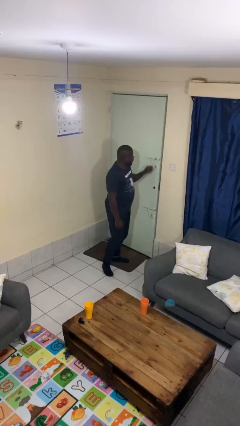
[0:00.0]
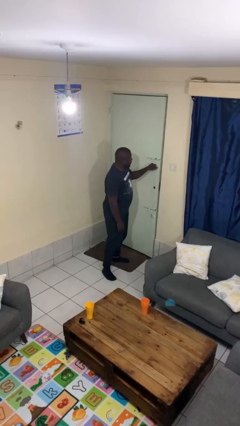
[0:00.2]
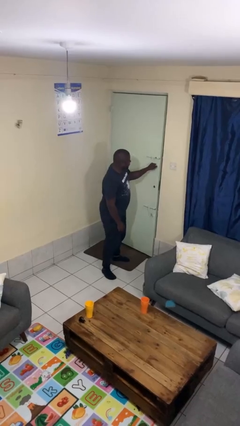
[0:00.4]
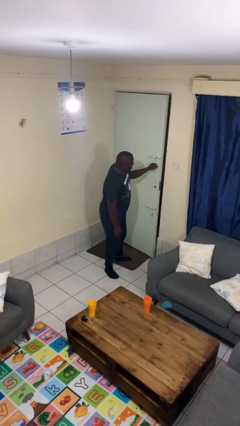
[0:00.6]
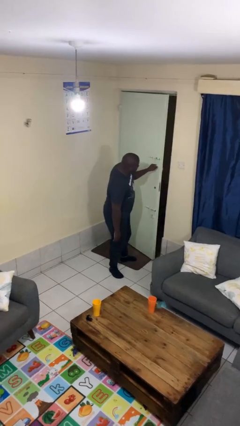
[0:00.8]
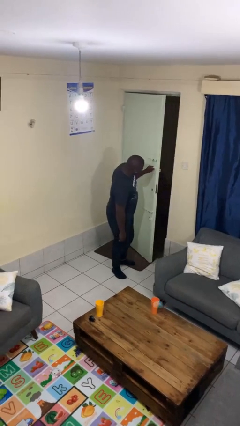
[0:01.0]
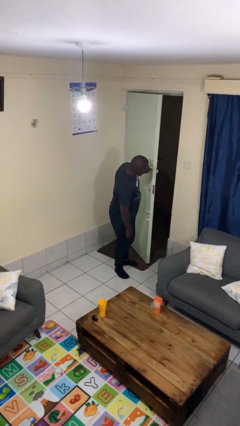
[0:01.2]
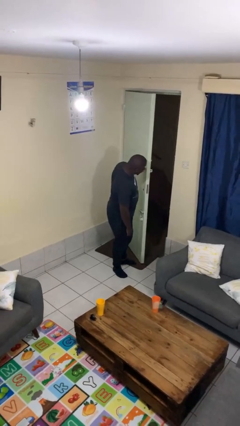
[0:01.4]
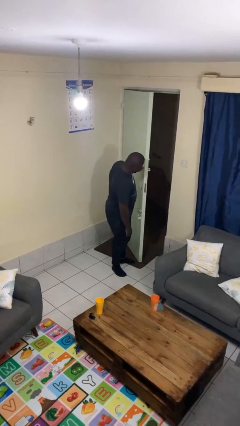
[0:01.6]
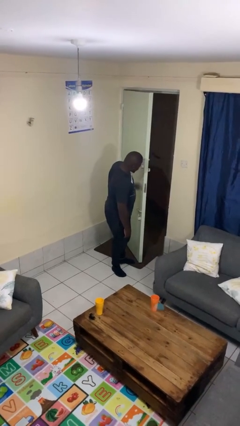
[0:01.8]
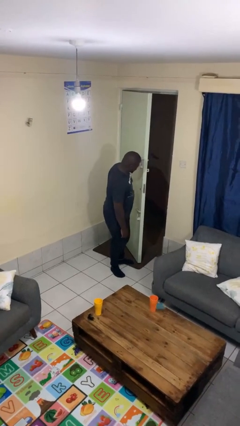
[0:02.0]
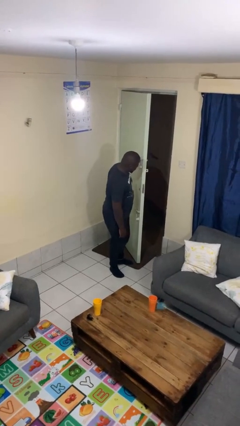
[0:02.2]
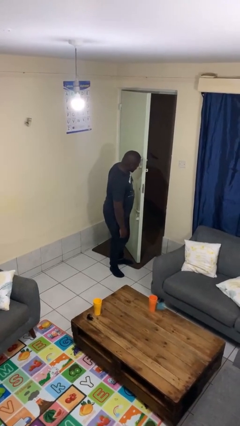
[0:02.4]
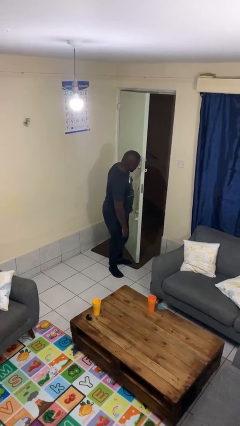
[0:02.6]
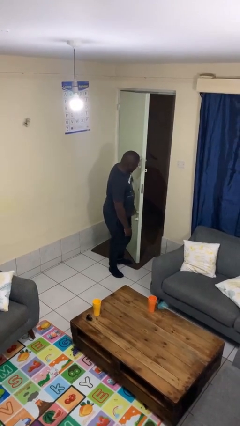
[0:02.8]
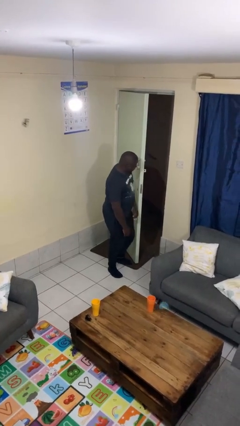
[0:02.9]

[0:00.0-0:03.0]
person opens facility door

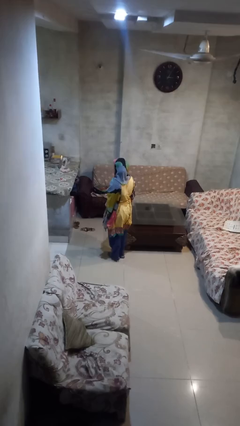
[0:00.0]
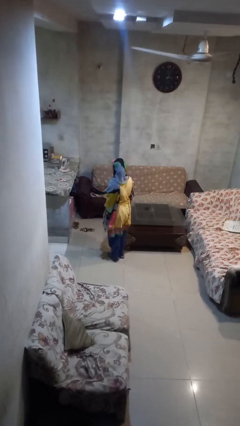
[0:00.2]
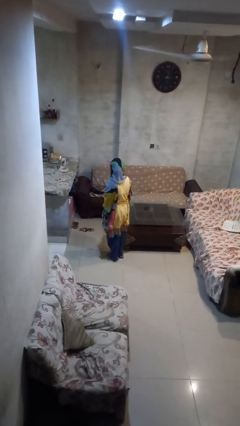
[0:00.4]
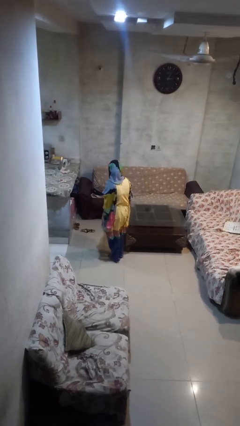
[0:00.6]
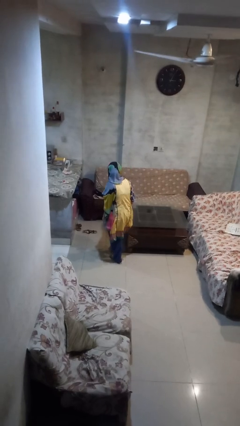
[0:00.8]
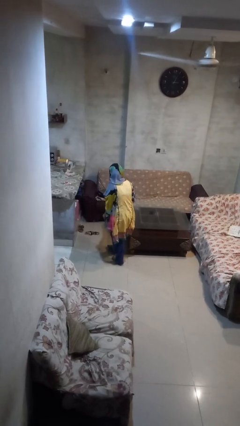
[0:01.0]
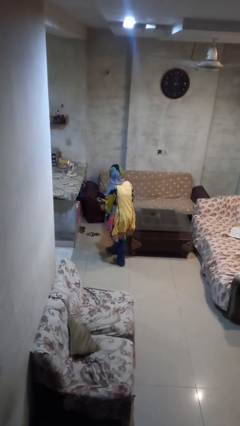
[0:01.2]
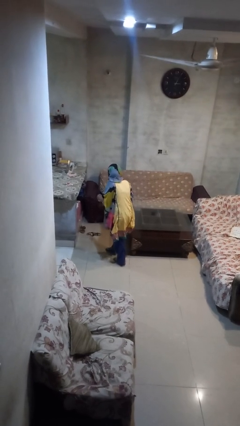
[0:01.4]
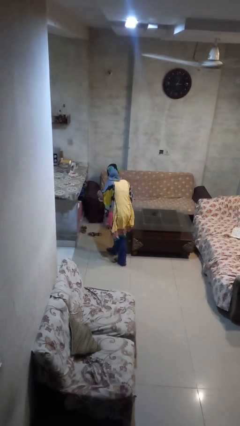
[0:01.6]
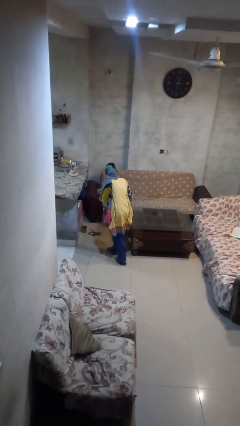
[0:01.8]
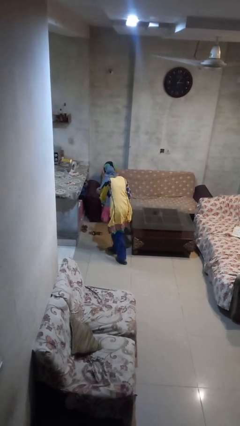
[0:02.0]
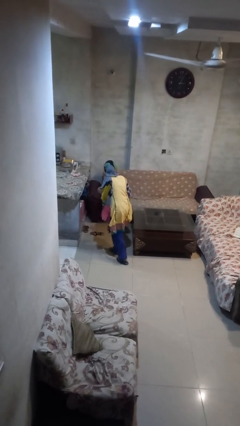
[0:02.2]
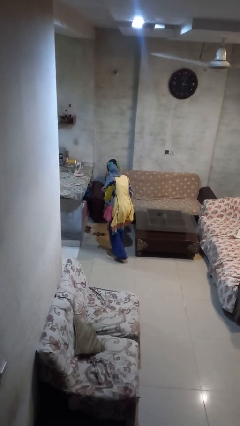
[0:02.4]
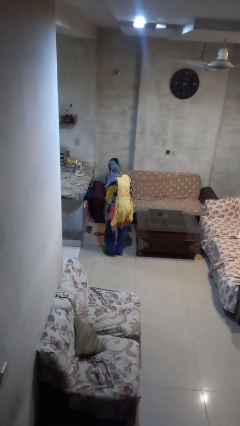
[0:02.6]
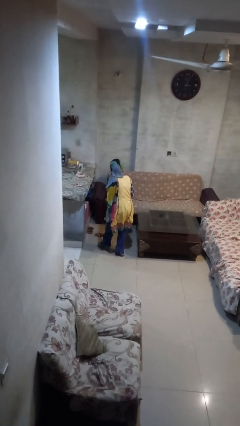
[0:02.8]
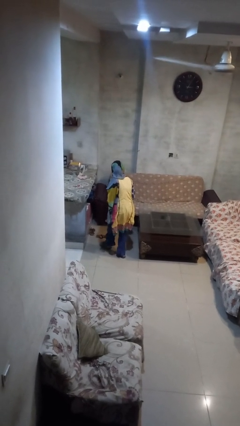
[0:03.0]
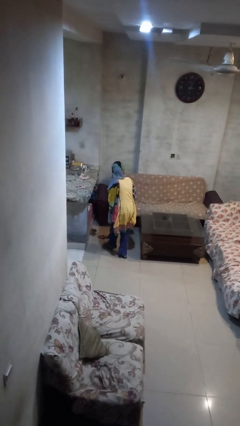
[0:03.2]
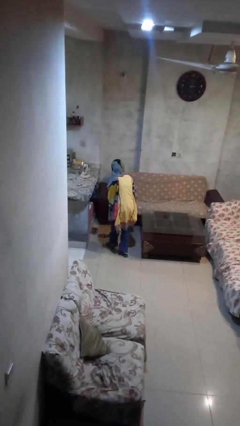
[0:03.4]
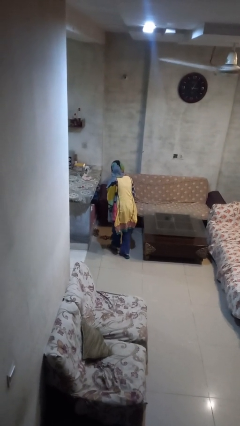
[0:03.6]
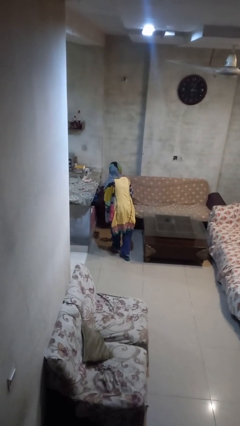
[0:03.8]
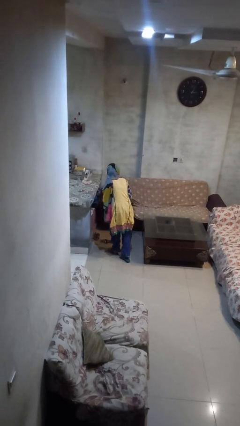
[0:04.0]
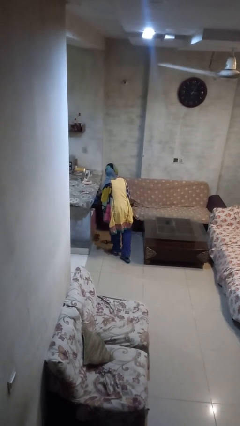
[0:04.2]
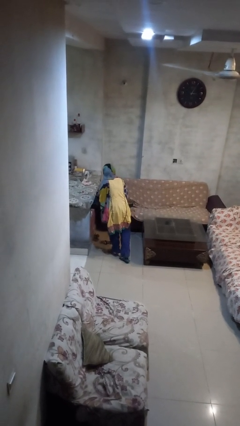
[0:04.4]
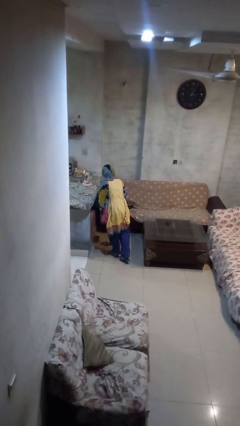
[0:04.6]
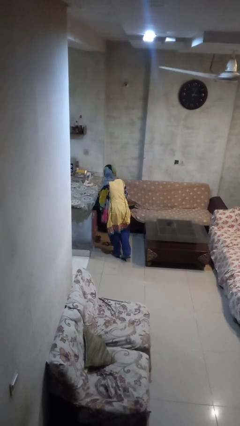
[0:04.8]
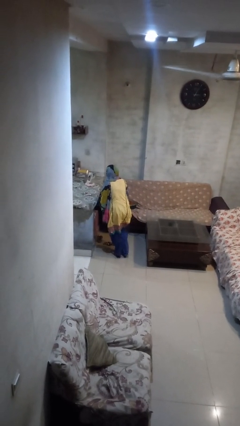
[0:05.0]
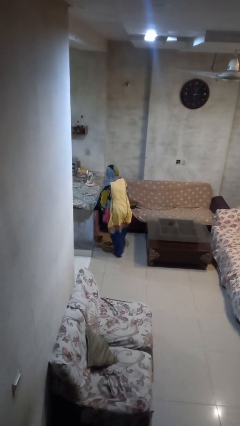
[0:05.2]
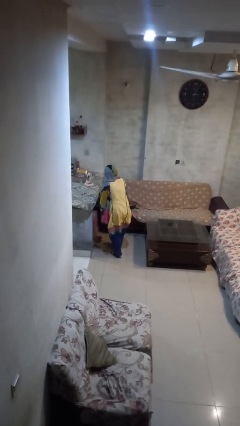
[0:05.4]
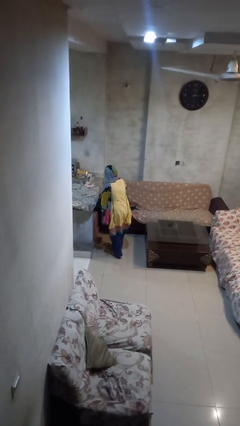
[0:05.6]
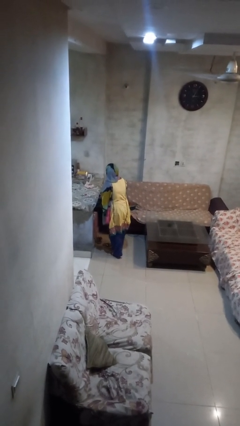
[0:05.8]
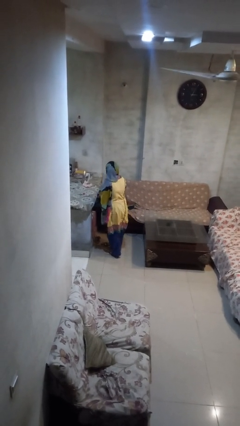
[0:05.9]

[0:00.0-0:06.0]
person walks tiptoe

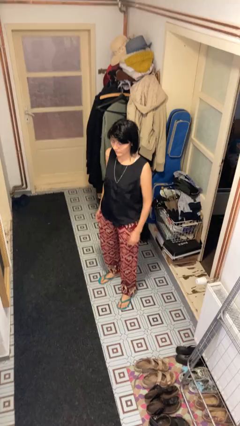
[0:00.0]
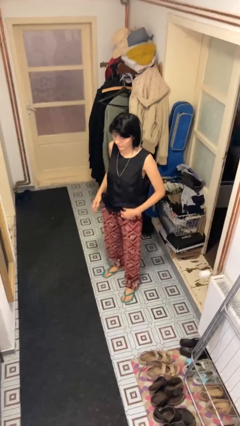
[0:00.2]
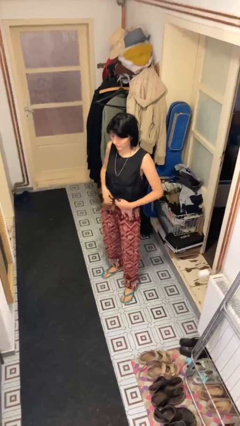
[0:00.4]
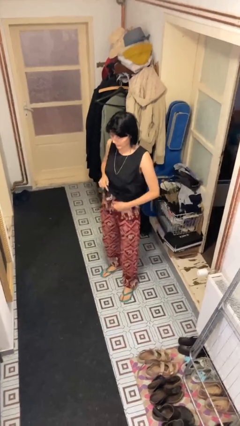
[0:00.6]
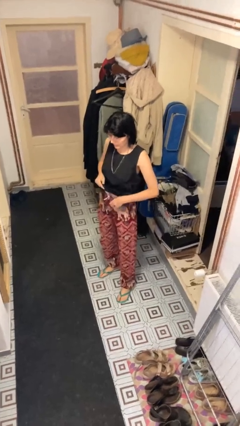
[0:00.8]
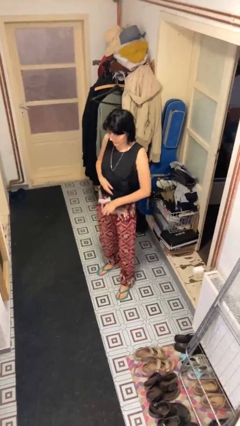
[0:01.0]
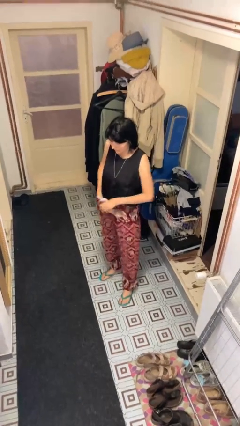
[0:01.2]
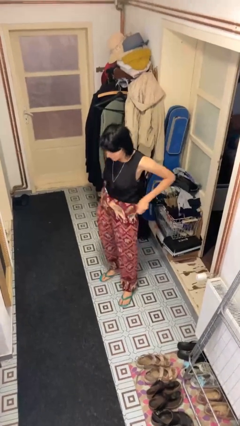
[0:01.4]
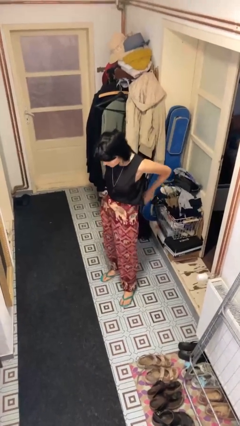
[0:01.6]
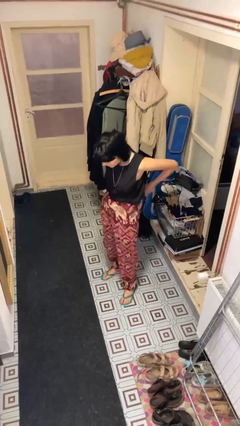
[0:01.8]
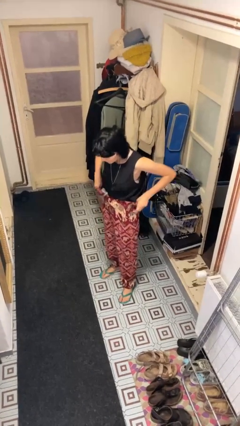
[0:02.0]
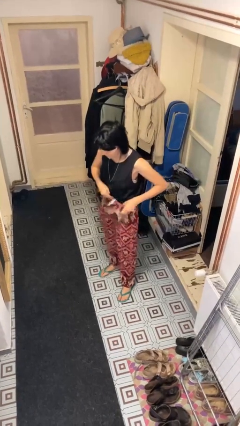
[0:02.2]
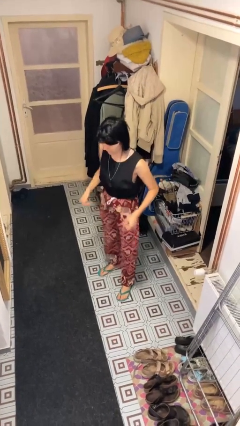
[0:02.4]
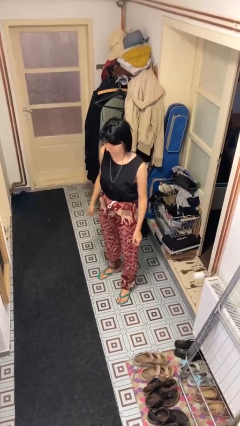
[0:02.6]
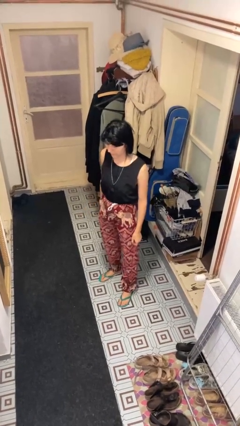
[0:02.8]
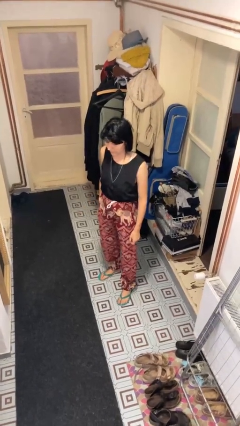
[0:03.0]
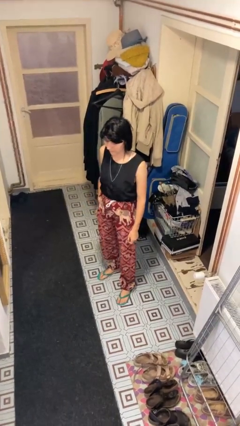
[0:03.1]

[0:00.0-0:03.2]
person tucks in shirt

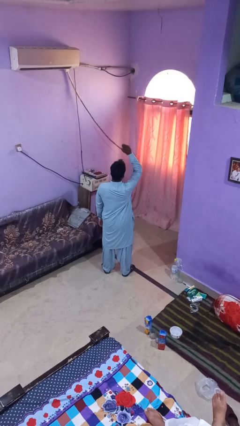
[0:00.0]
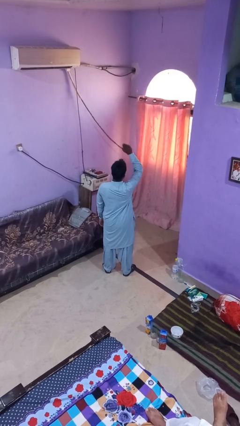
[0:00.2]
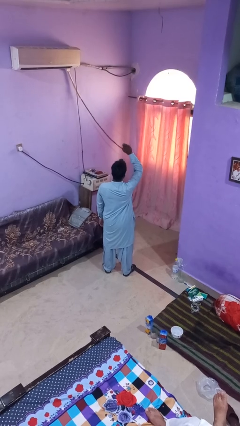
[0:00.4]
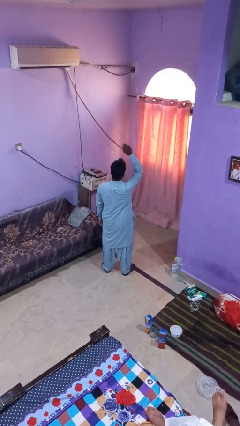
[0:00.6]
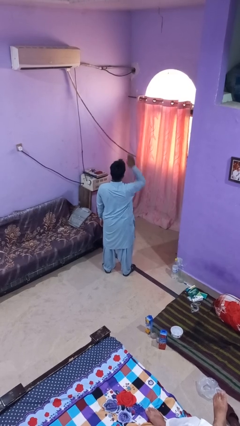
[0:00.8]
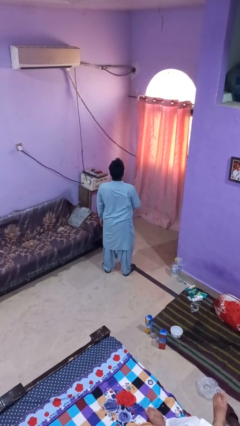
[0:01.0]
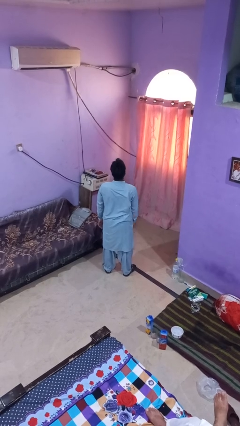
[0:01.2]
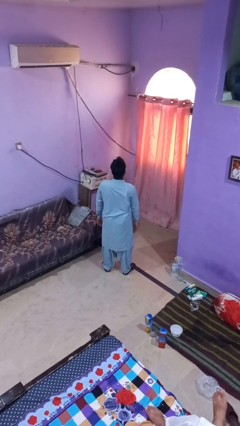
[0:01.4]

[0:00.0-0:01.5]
person gestures lower hand

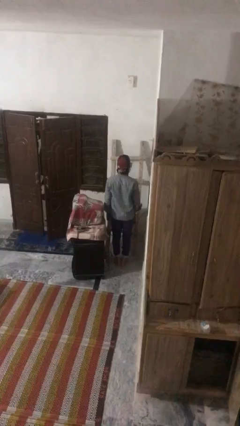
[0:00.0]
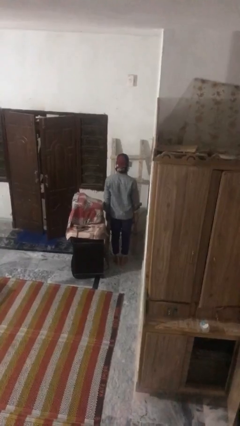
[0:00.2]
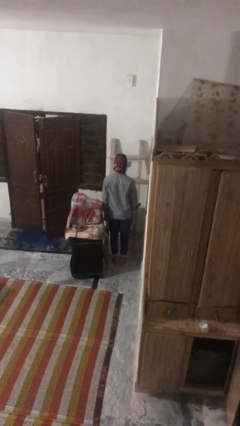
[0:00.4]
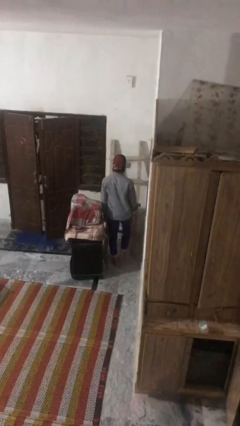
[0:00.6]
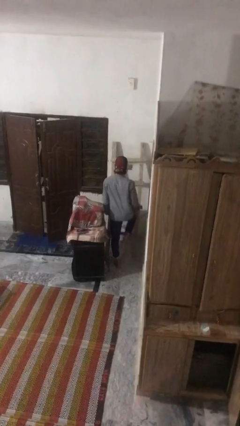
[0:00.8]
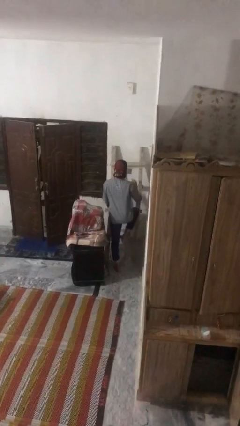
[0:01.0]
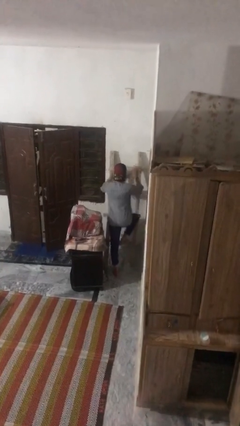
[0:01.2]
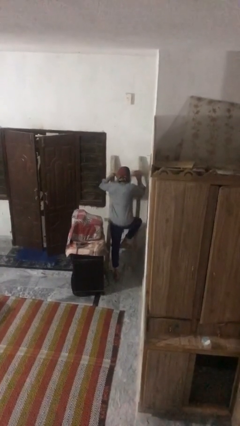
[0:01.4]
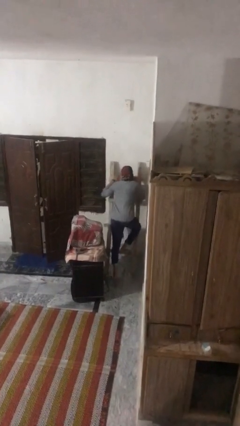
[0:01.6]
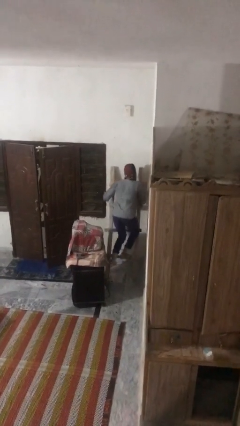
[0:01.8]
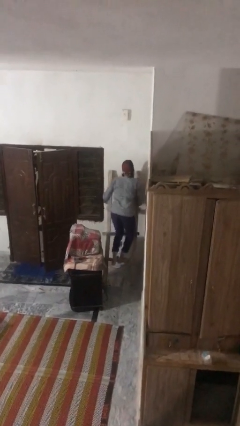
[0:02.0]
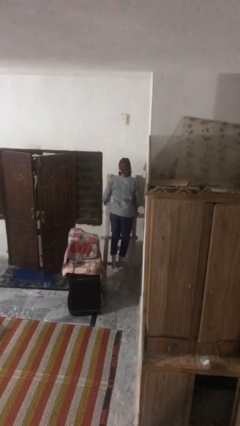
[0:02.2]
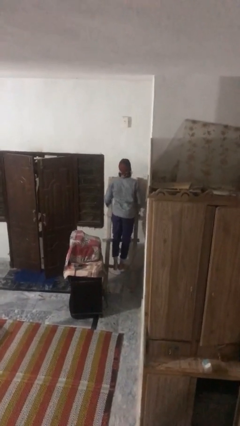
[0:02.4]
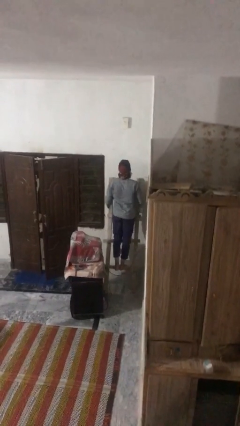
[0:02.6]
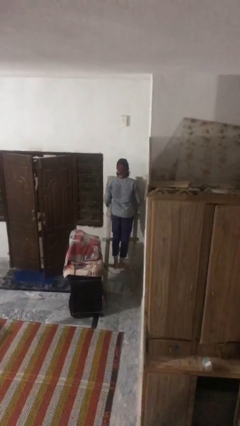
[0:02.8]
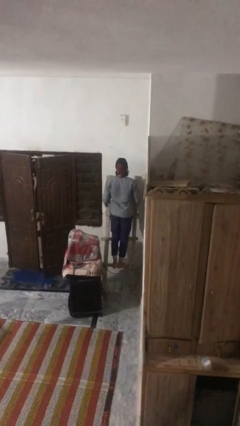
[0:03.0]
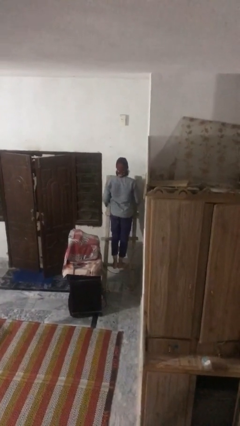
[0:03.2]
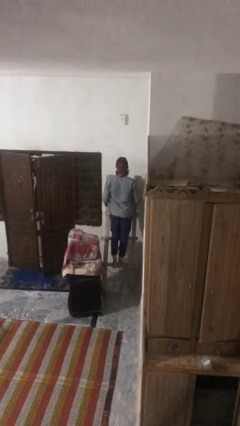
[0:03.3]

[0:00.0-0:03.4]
person climbs up ladder

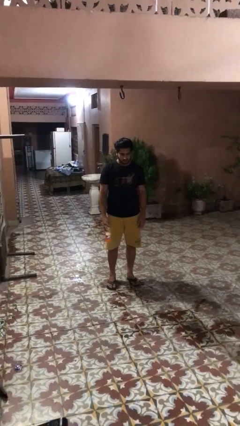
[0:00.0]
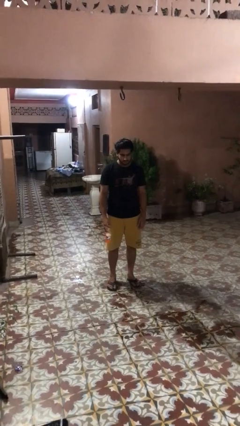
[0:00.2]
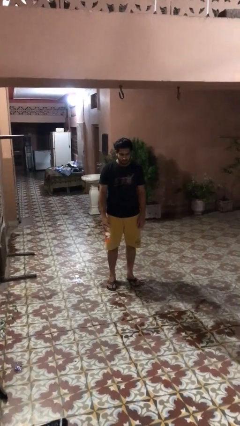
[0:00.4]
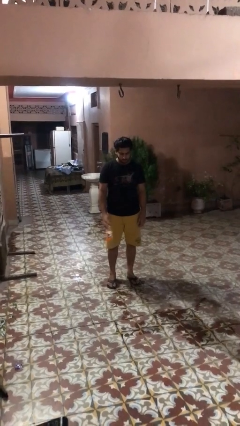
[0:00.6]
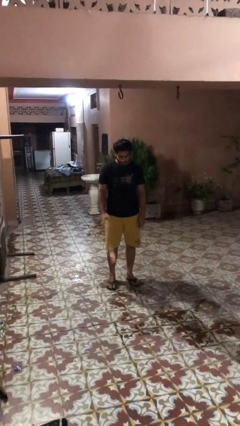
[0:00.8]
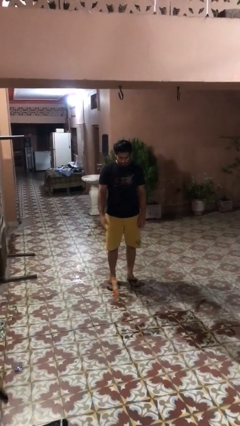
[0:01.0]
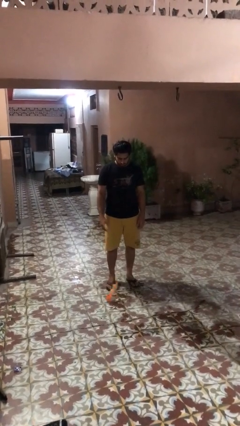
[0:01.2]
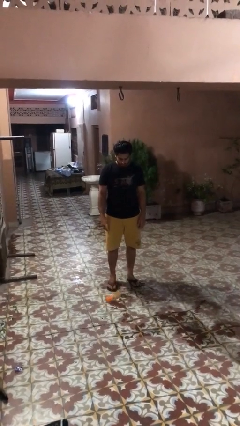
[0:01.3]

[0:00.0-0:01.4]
person throws object into air
